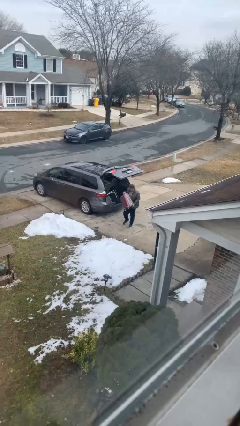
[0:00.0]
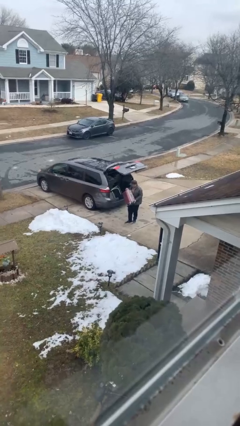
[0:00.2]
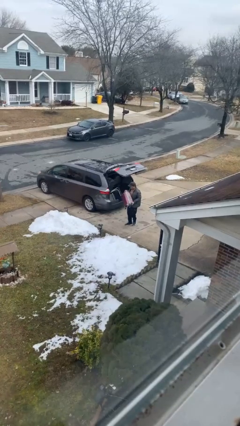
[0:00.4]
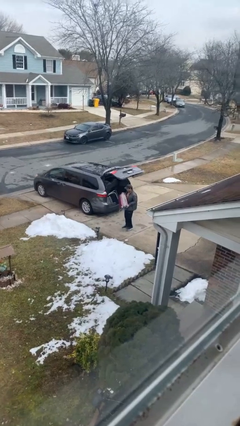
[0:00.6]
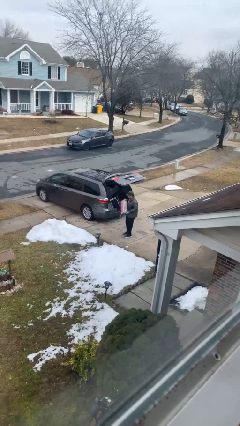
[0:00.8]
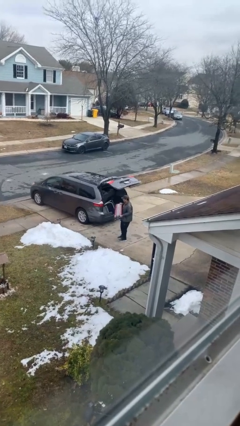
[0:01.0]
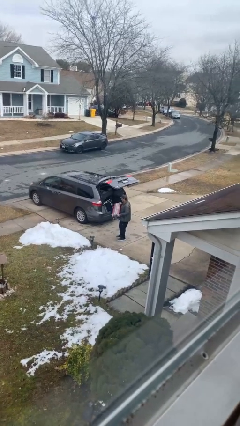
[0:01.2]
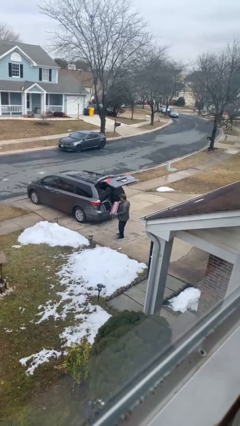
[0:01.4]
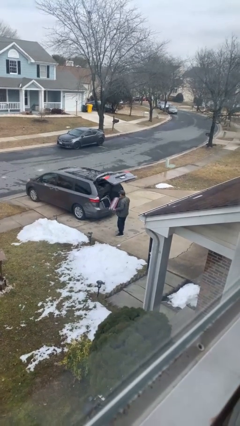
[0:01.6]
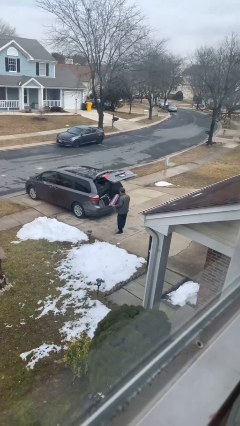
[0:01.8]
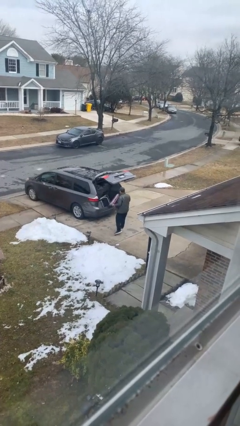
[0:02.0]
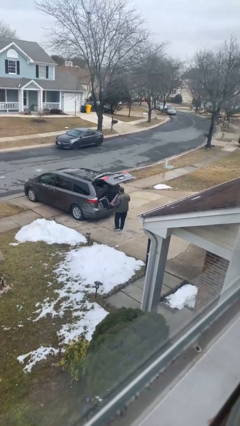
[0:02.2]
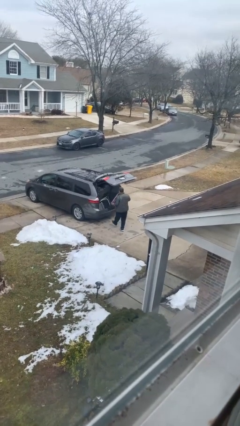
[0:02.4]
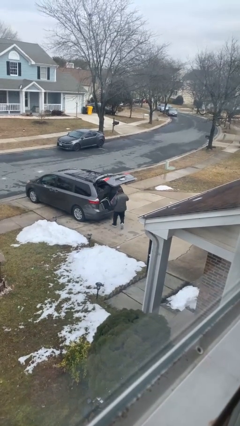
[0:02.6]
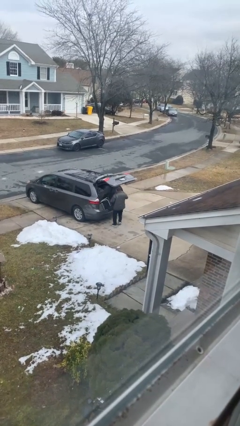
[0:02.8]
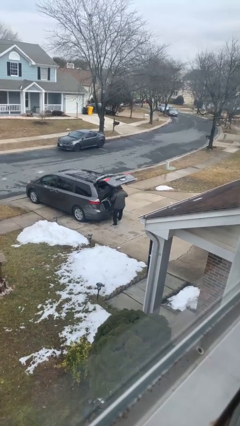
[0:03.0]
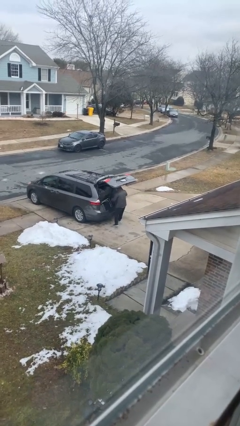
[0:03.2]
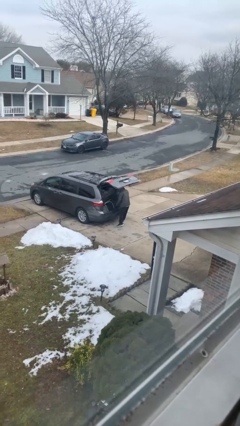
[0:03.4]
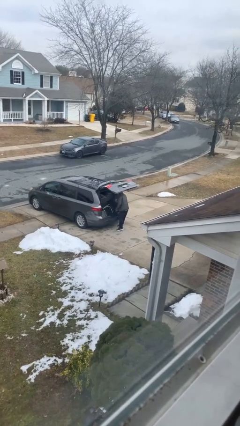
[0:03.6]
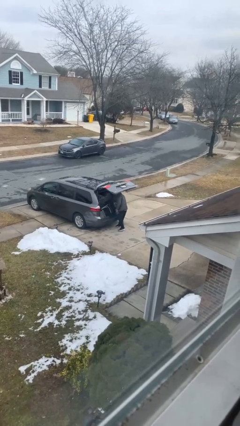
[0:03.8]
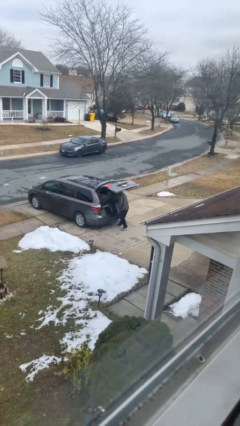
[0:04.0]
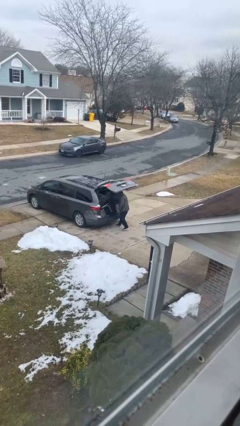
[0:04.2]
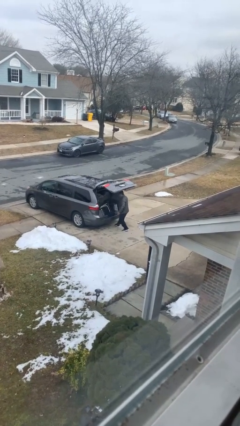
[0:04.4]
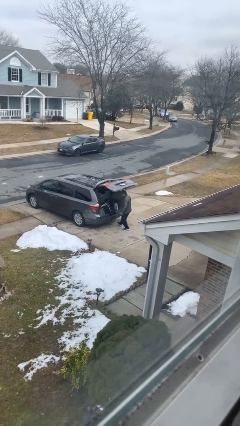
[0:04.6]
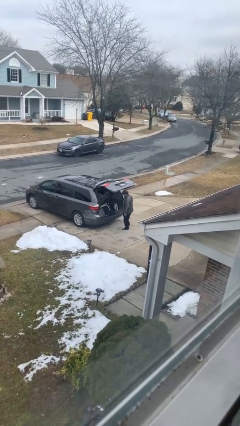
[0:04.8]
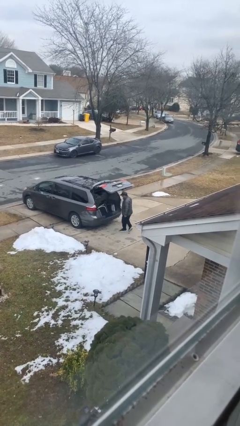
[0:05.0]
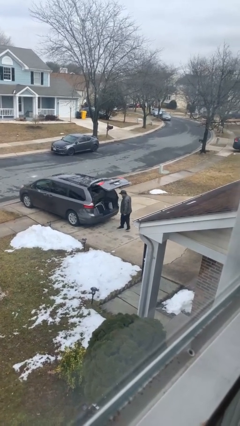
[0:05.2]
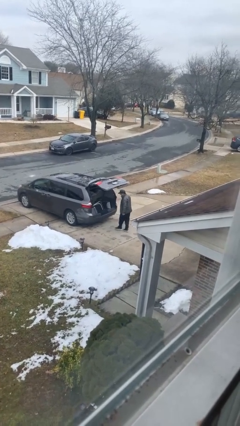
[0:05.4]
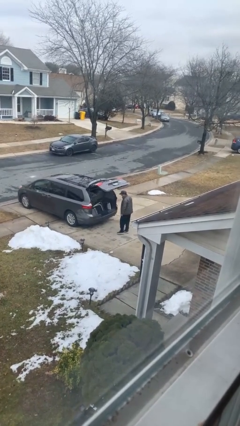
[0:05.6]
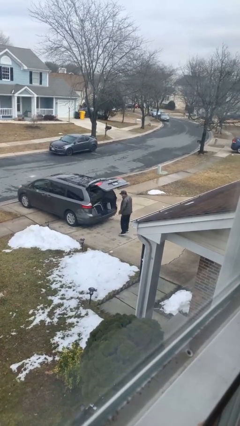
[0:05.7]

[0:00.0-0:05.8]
person loads car

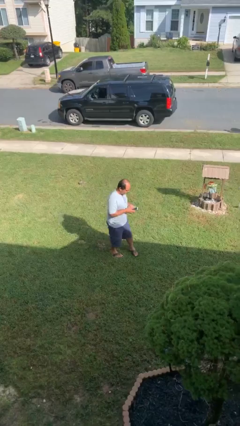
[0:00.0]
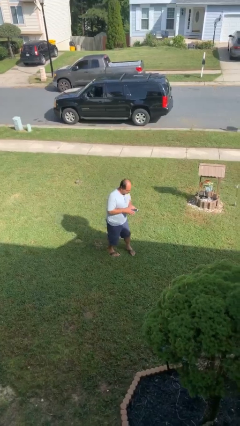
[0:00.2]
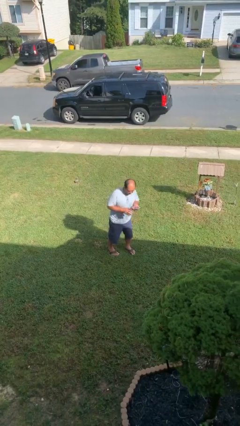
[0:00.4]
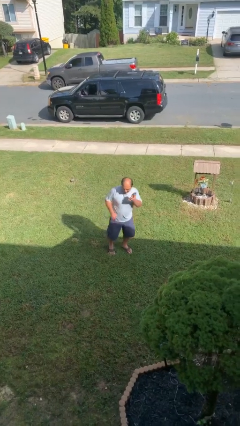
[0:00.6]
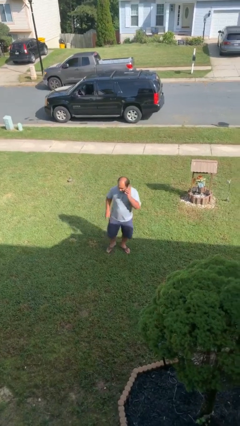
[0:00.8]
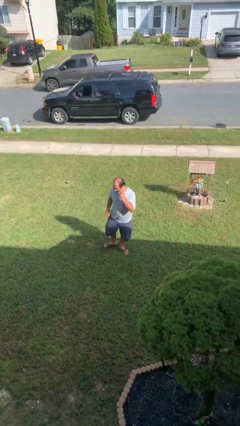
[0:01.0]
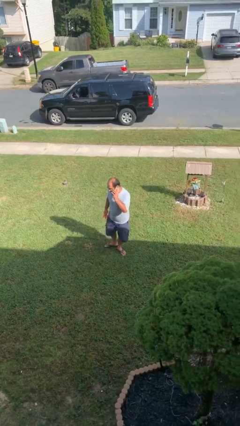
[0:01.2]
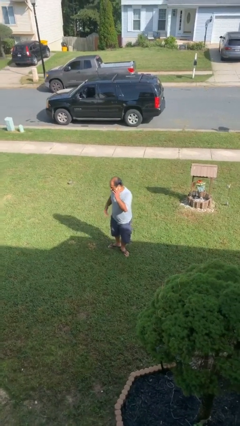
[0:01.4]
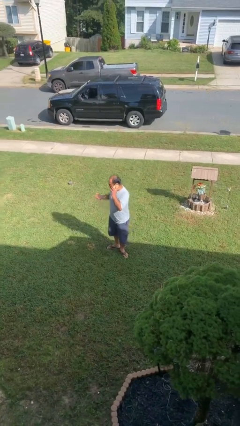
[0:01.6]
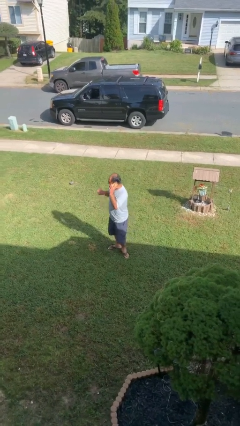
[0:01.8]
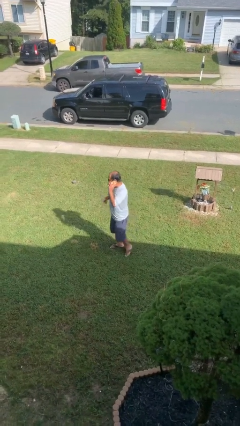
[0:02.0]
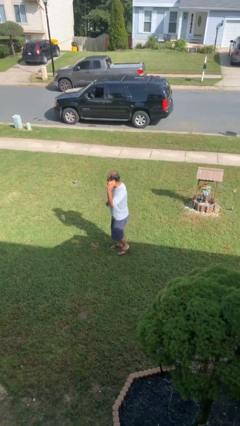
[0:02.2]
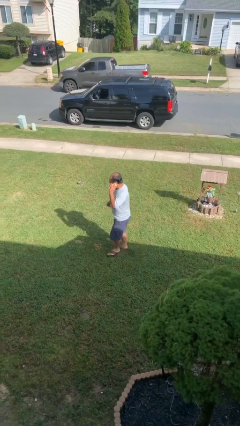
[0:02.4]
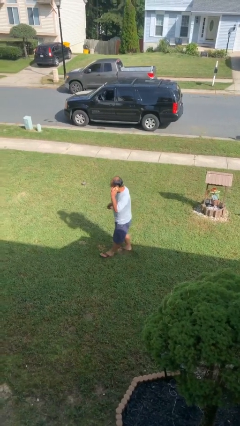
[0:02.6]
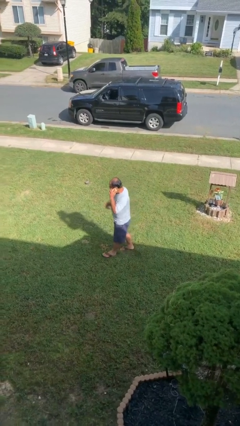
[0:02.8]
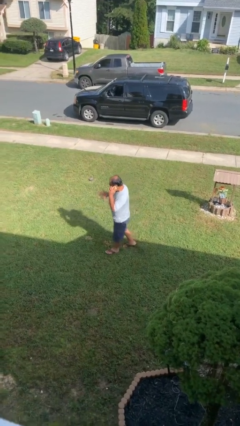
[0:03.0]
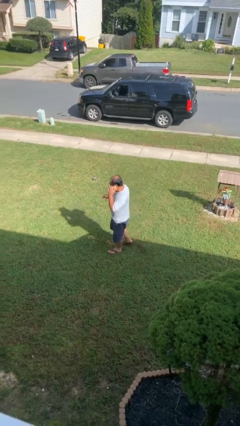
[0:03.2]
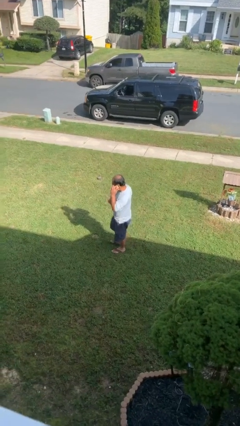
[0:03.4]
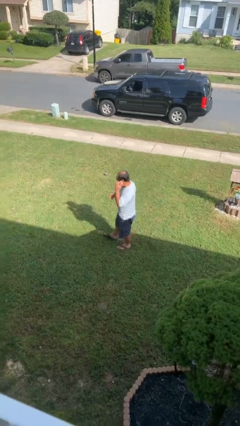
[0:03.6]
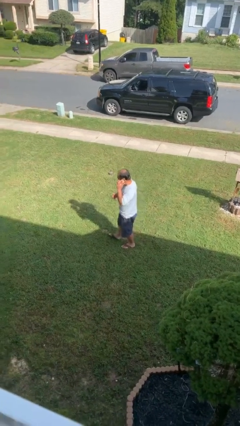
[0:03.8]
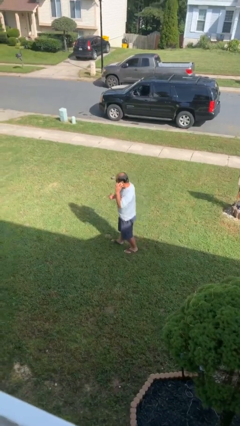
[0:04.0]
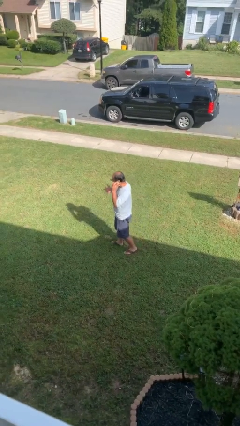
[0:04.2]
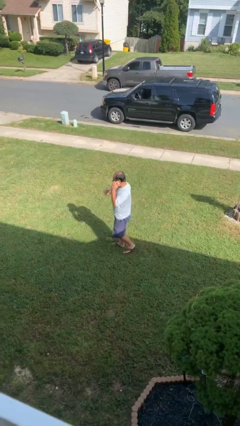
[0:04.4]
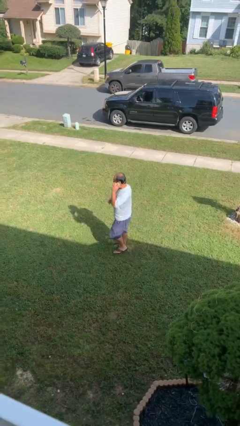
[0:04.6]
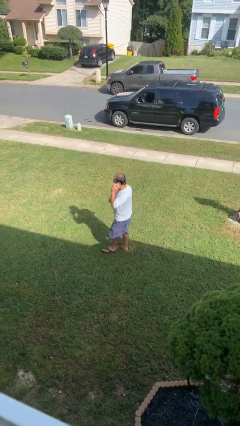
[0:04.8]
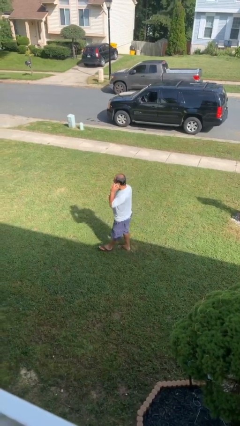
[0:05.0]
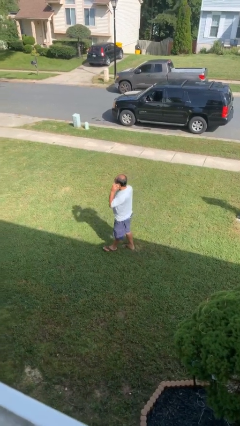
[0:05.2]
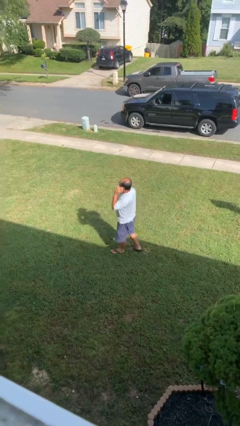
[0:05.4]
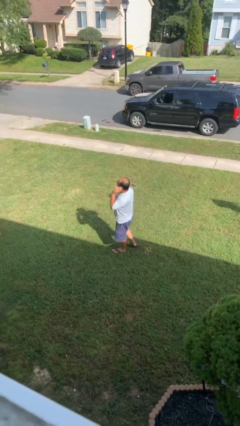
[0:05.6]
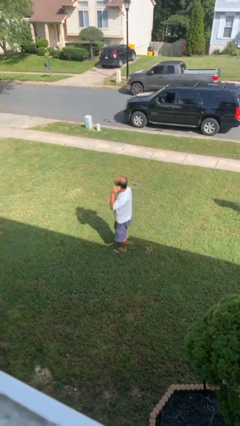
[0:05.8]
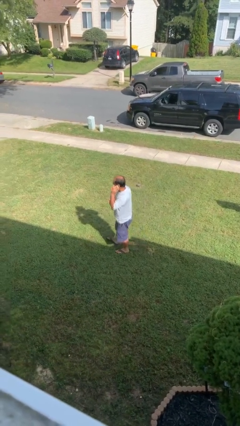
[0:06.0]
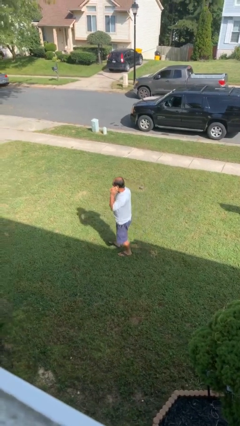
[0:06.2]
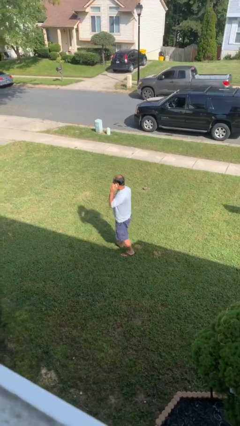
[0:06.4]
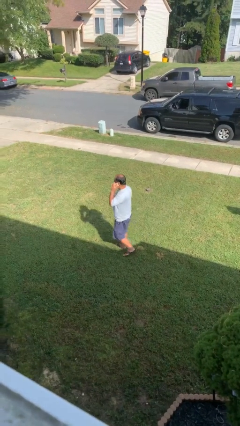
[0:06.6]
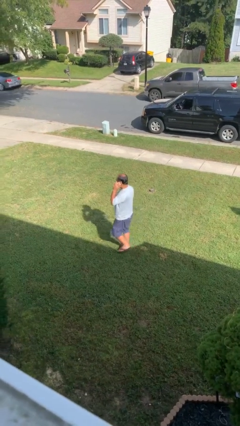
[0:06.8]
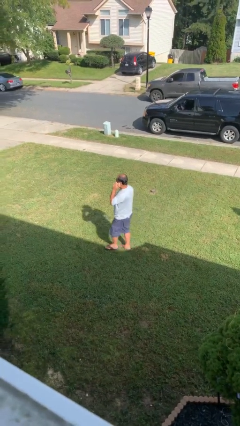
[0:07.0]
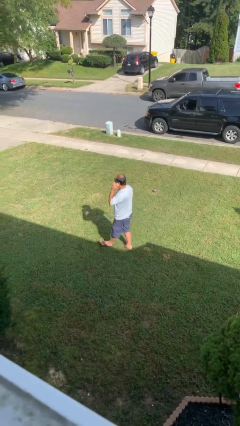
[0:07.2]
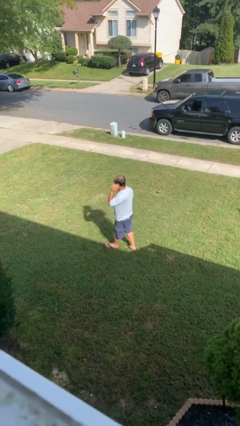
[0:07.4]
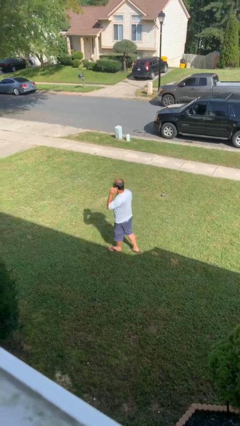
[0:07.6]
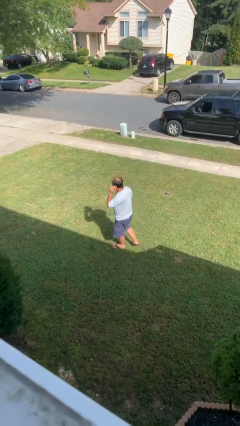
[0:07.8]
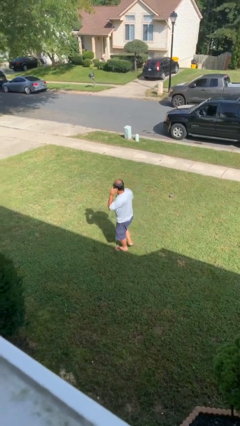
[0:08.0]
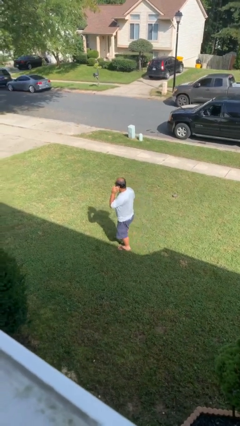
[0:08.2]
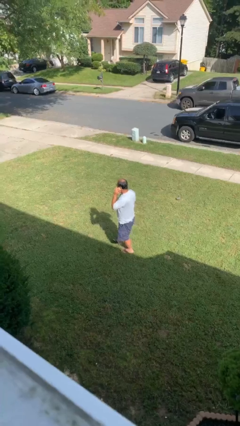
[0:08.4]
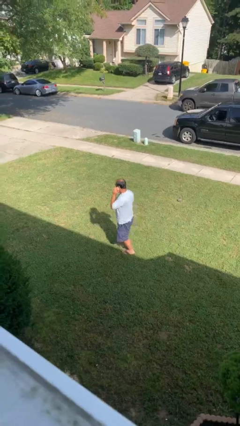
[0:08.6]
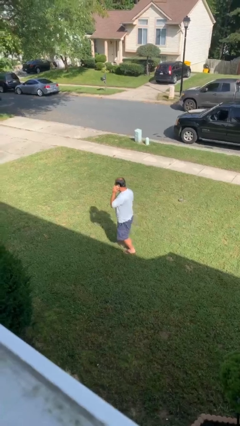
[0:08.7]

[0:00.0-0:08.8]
person talks on phone

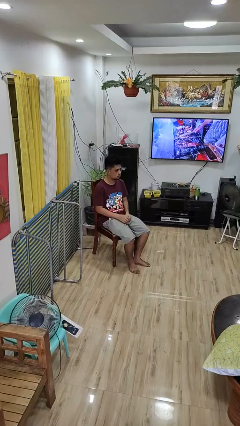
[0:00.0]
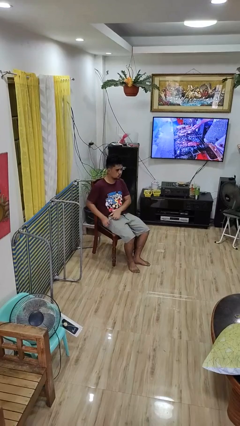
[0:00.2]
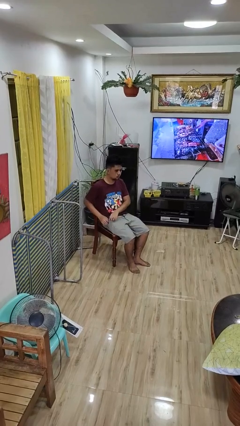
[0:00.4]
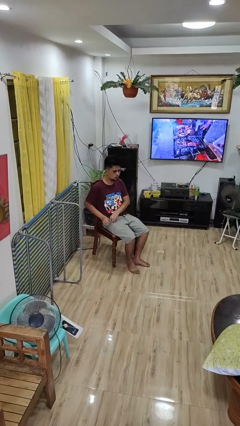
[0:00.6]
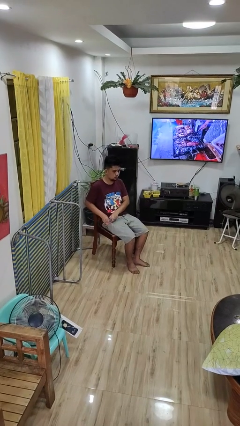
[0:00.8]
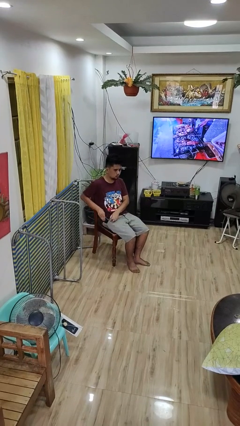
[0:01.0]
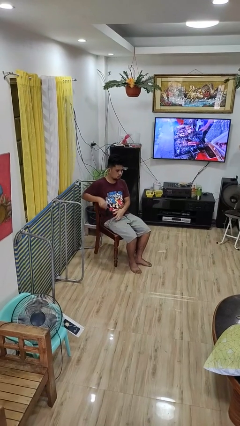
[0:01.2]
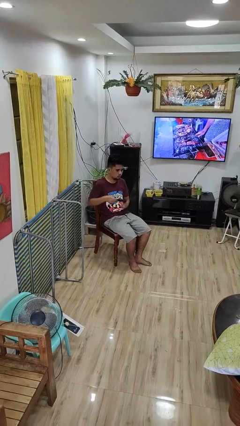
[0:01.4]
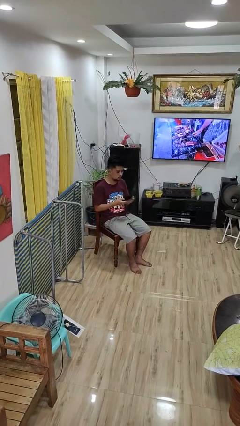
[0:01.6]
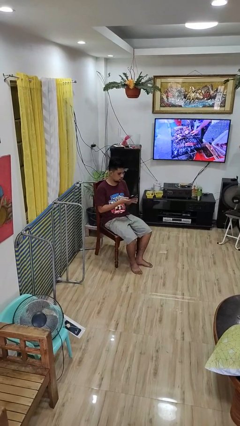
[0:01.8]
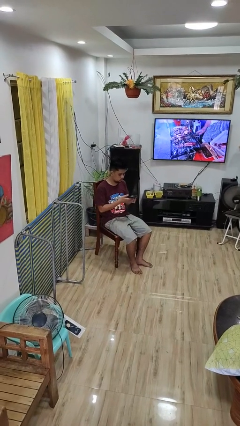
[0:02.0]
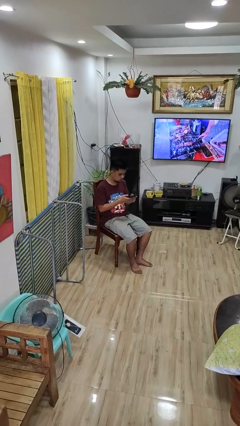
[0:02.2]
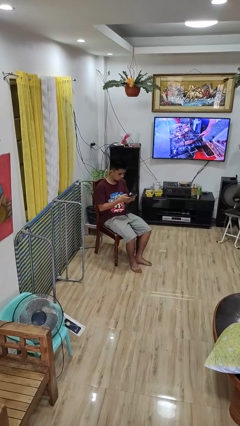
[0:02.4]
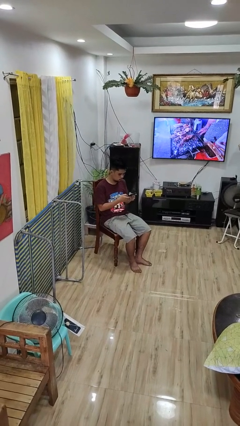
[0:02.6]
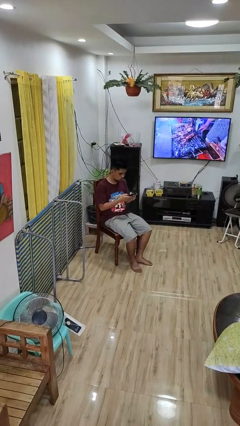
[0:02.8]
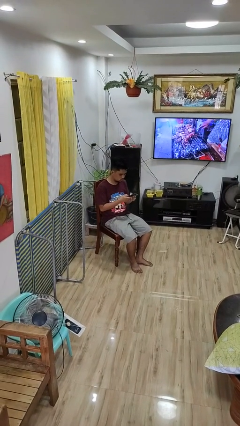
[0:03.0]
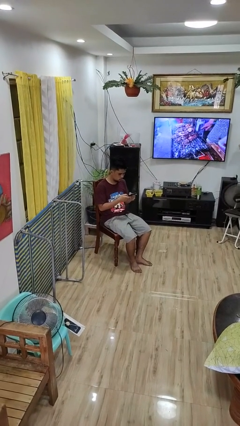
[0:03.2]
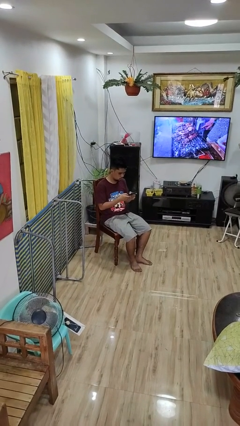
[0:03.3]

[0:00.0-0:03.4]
person takes phone from pocket
